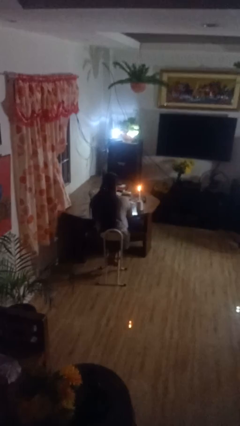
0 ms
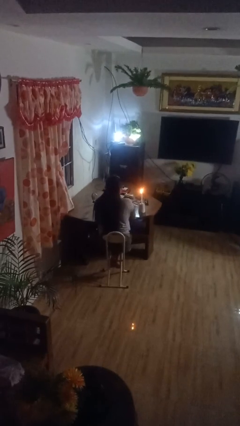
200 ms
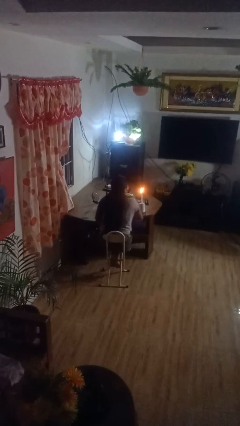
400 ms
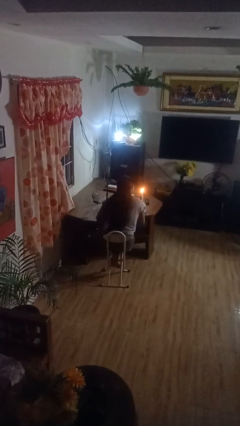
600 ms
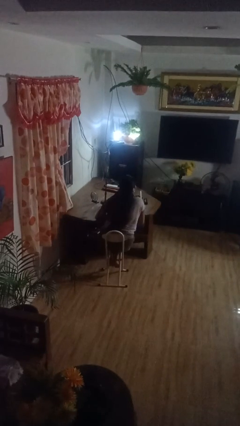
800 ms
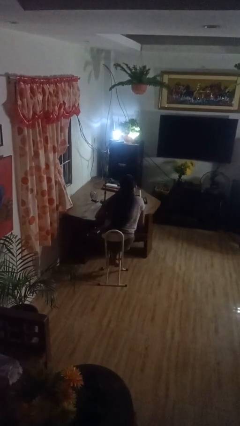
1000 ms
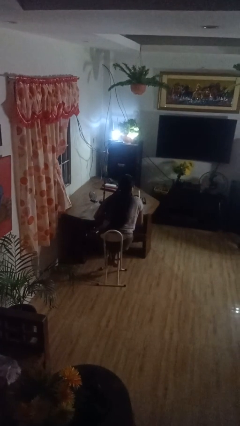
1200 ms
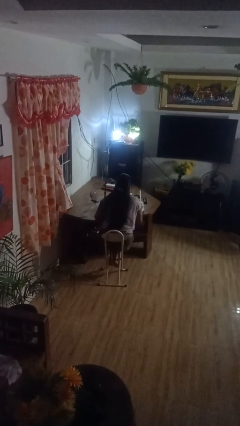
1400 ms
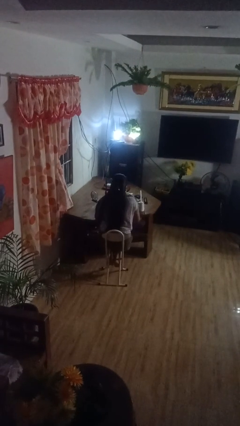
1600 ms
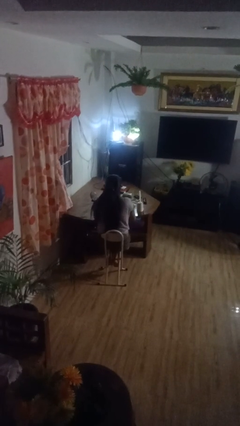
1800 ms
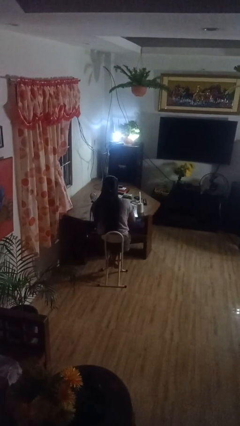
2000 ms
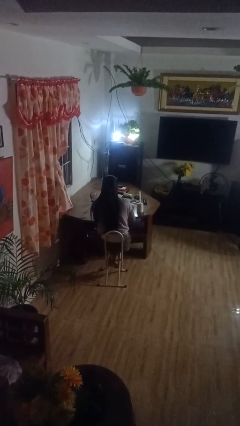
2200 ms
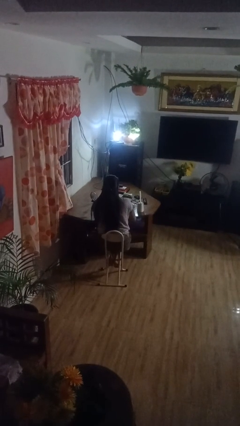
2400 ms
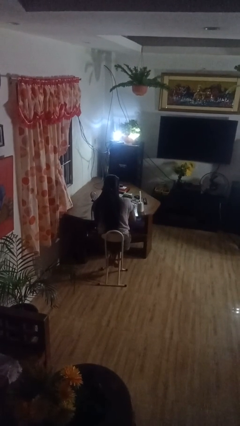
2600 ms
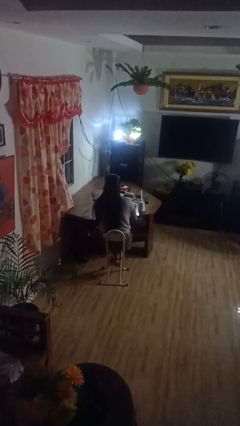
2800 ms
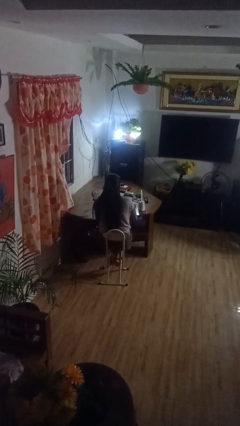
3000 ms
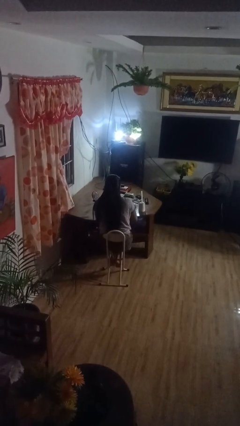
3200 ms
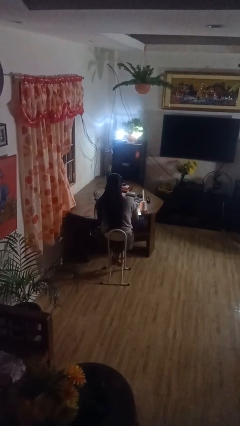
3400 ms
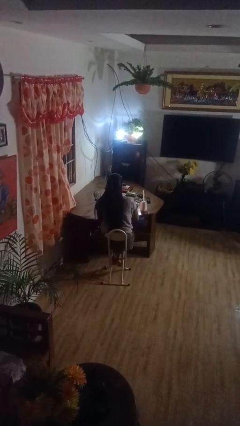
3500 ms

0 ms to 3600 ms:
person extinguishes candle

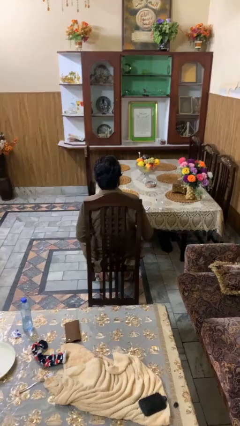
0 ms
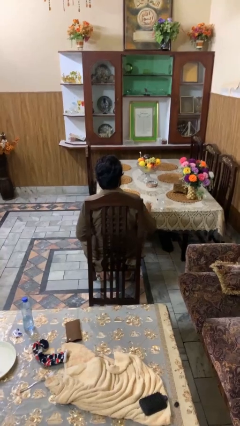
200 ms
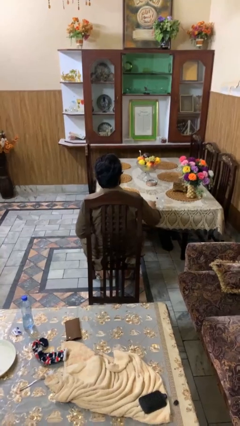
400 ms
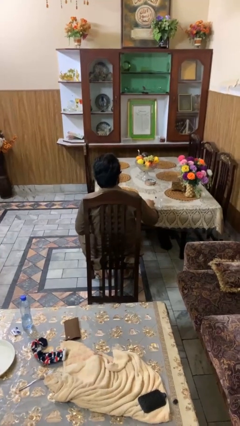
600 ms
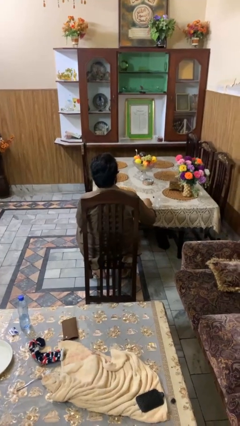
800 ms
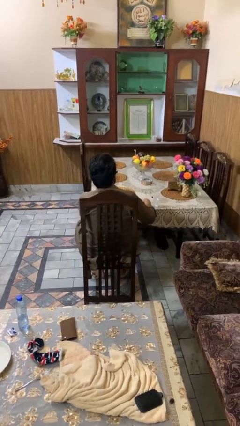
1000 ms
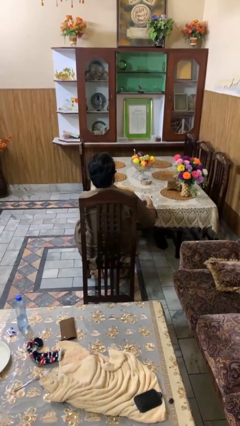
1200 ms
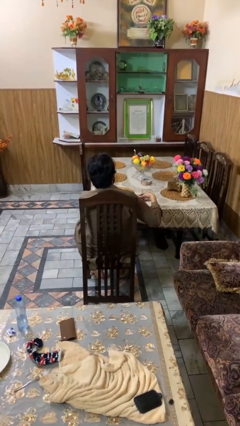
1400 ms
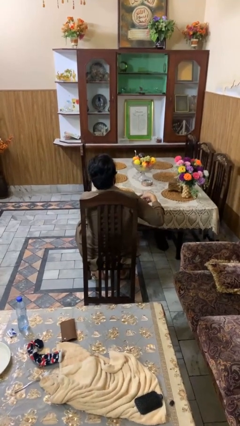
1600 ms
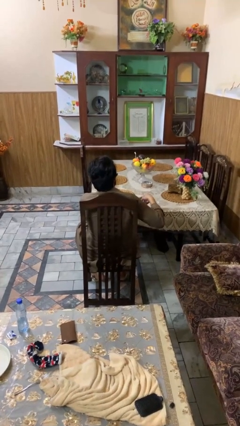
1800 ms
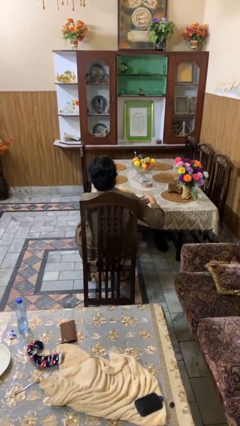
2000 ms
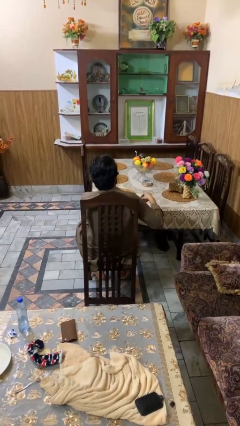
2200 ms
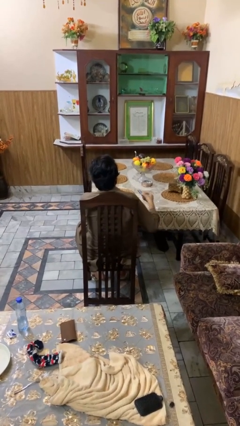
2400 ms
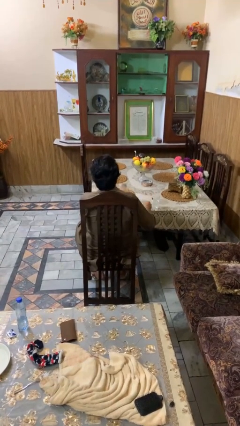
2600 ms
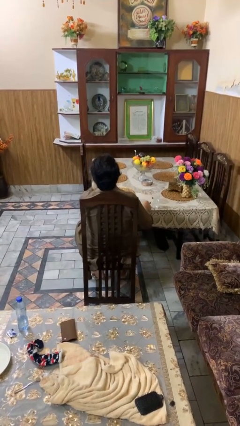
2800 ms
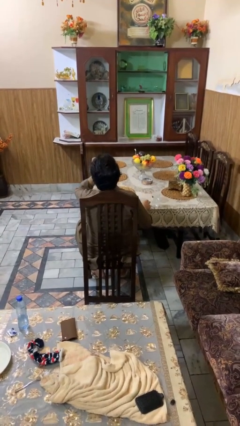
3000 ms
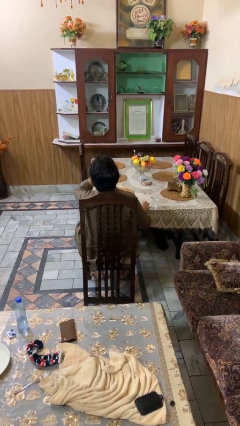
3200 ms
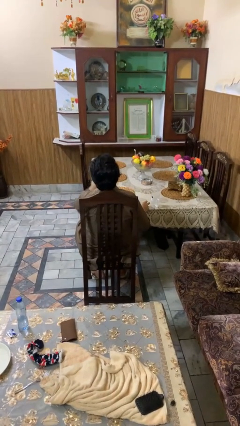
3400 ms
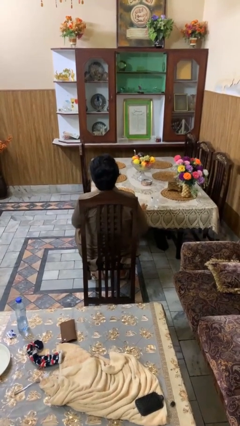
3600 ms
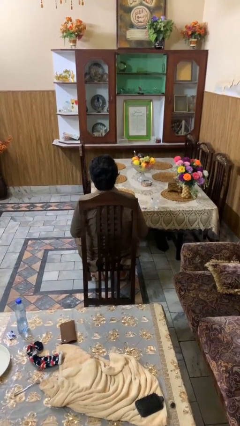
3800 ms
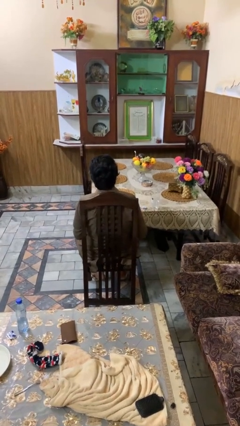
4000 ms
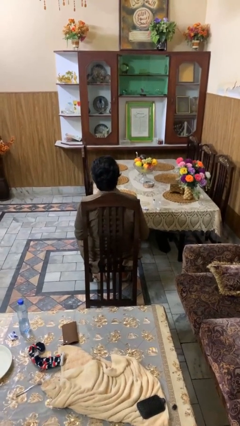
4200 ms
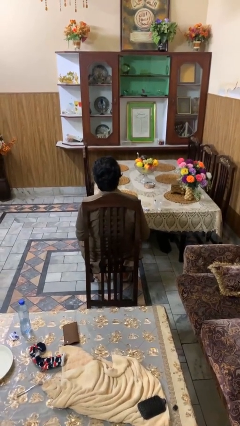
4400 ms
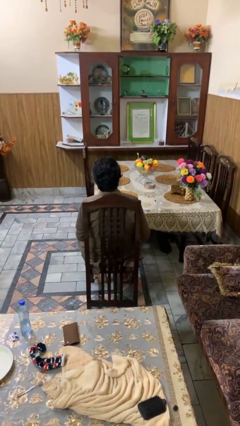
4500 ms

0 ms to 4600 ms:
person takes medicine pills

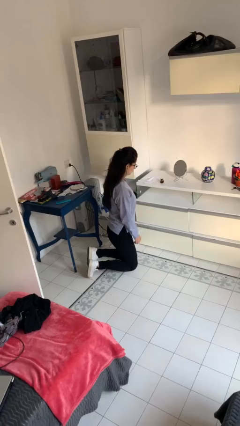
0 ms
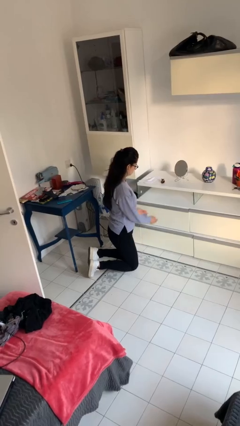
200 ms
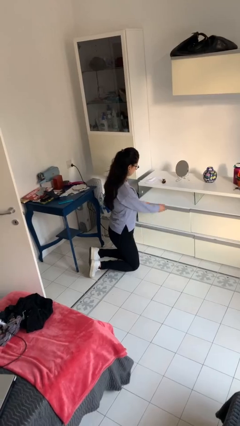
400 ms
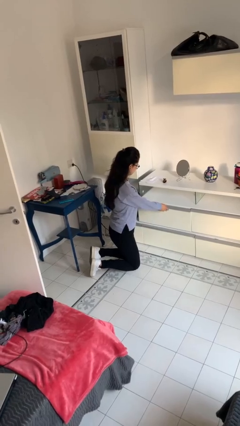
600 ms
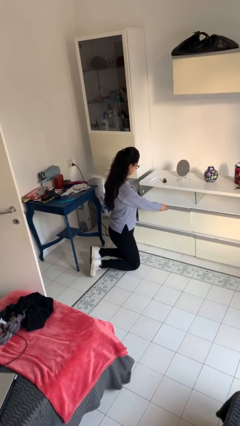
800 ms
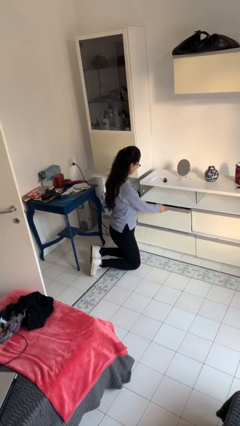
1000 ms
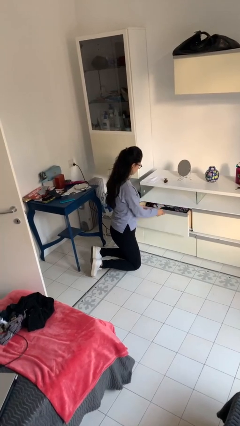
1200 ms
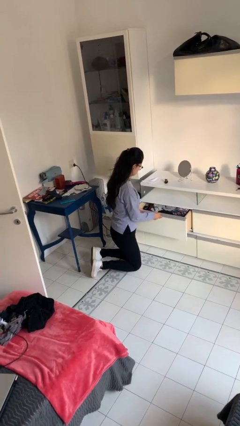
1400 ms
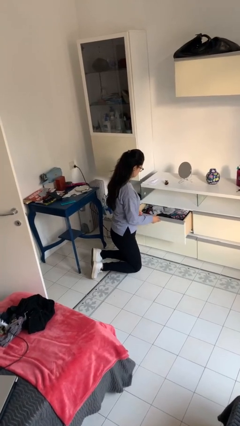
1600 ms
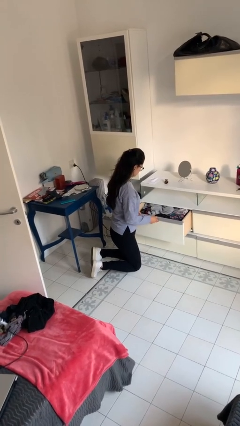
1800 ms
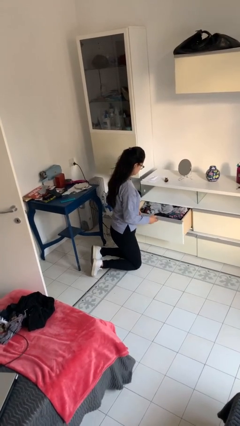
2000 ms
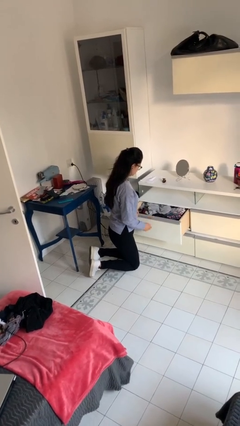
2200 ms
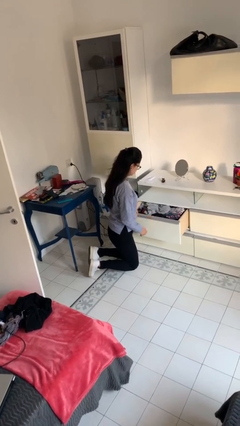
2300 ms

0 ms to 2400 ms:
person opens dresser drawer

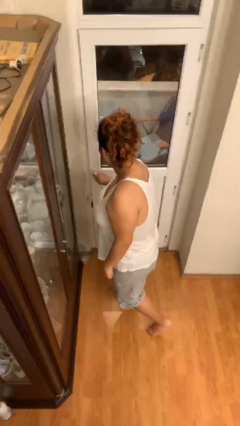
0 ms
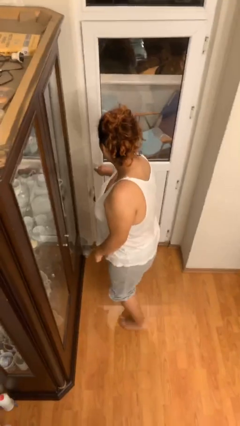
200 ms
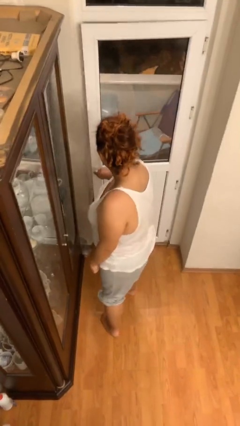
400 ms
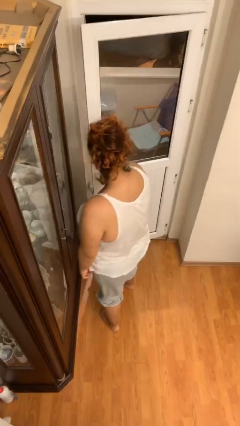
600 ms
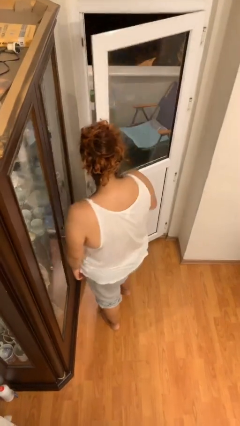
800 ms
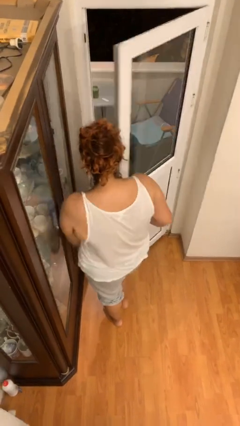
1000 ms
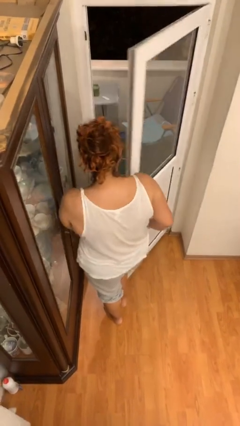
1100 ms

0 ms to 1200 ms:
person opens facility door

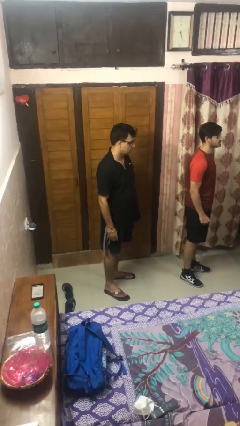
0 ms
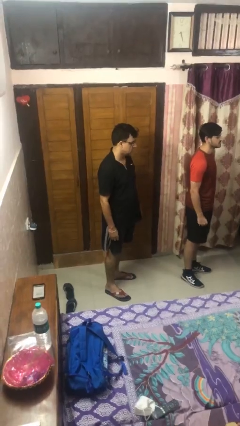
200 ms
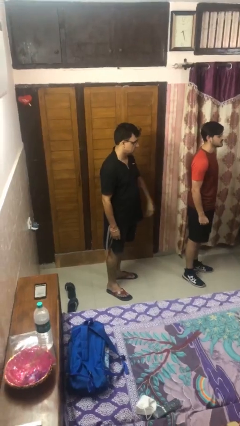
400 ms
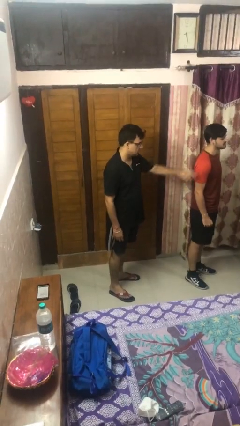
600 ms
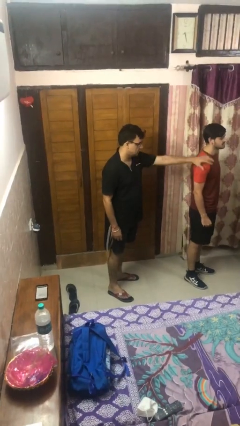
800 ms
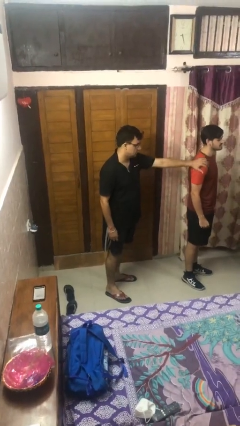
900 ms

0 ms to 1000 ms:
person grabs person by shoulder

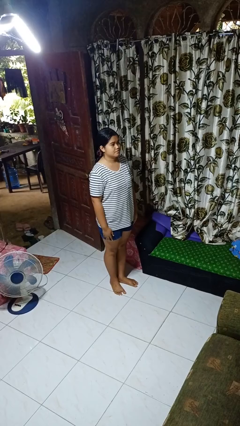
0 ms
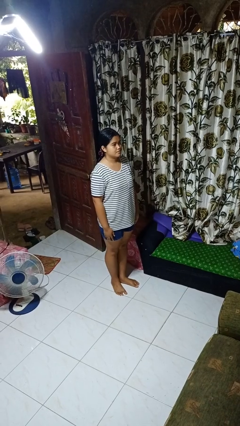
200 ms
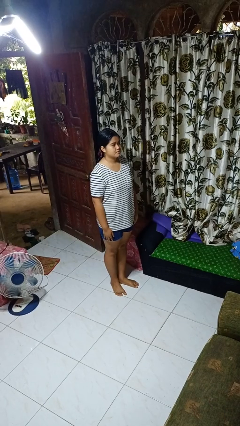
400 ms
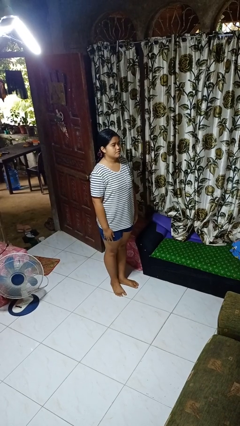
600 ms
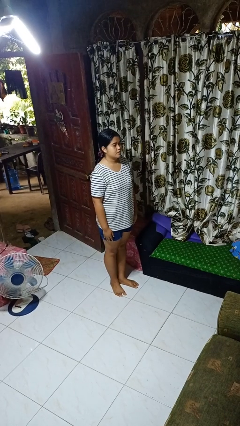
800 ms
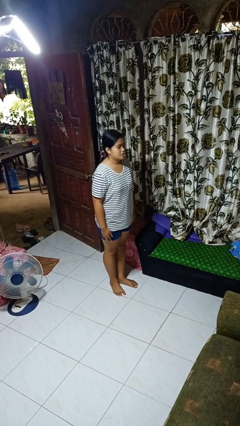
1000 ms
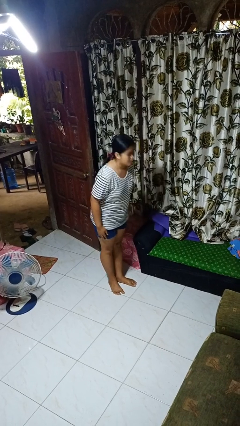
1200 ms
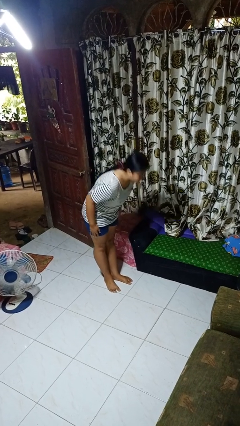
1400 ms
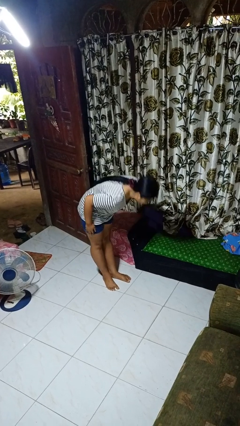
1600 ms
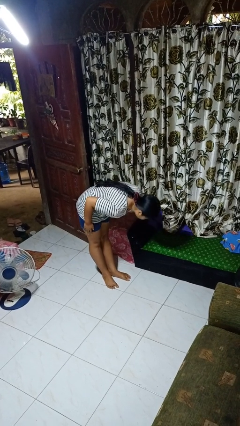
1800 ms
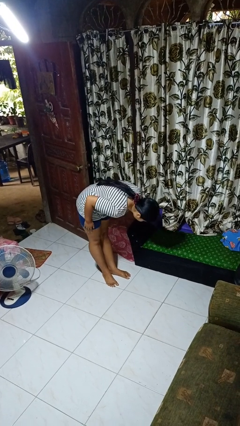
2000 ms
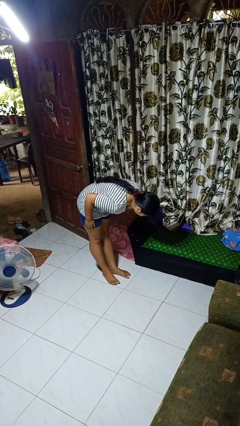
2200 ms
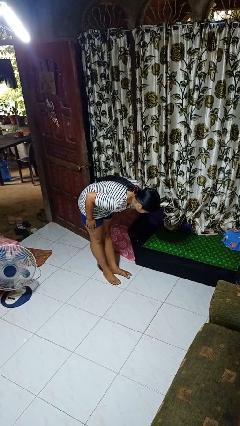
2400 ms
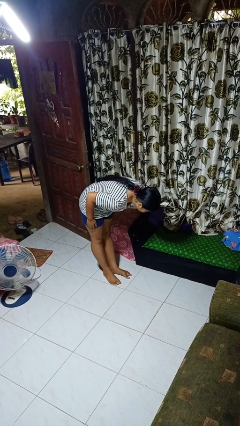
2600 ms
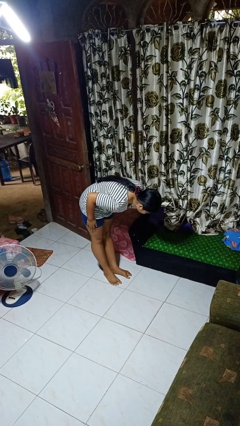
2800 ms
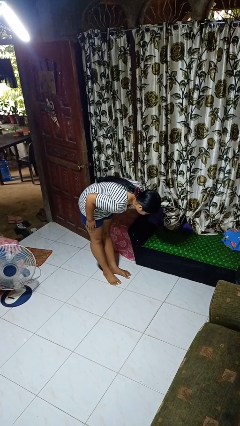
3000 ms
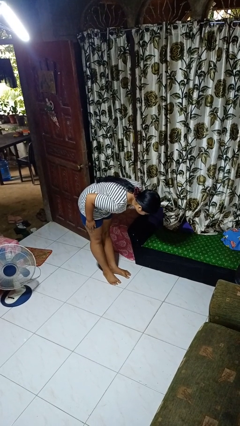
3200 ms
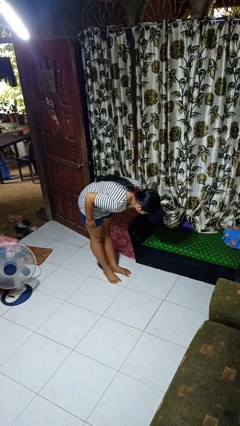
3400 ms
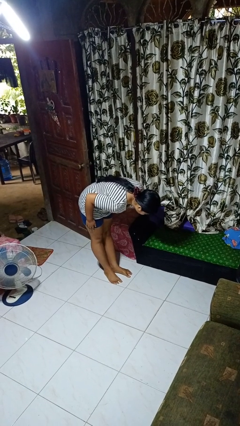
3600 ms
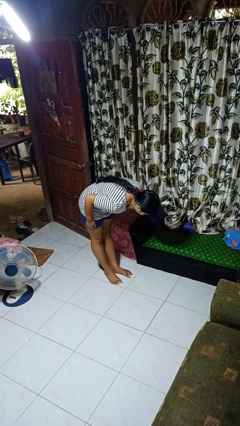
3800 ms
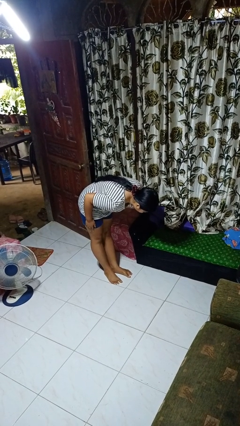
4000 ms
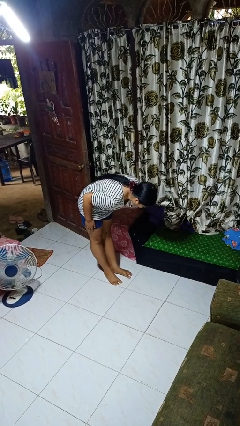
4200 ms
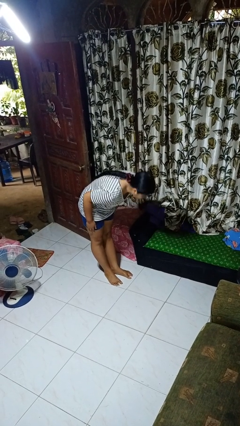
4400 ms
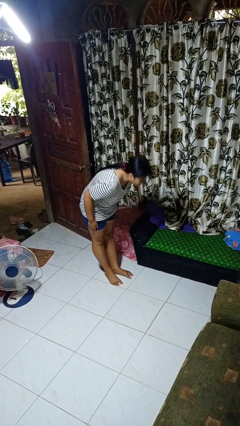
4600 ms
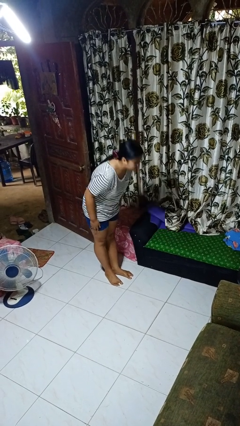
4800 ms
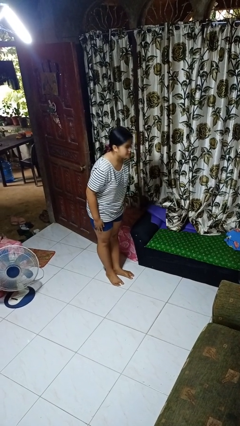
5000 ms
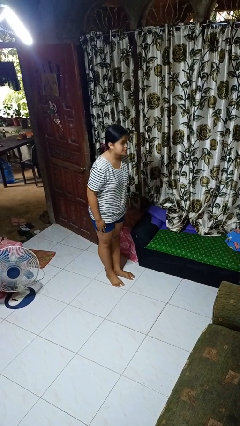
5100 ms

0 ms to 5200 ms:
person bows
